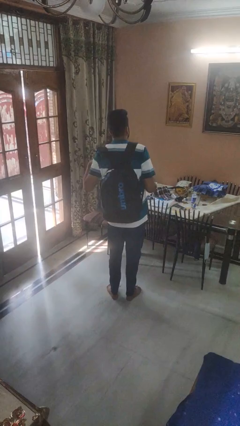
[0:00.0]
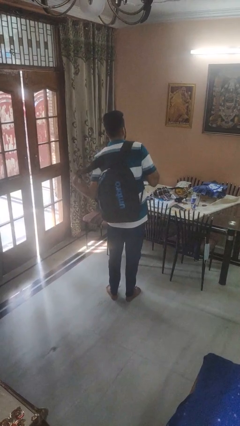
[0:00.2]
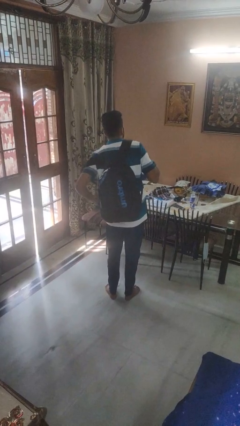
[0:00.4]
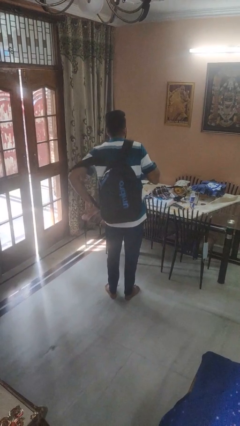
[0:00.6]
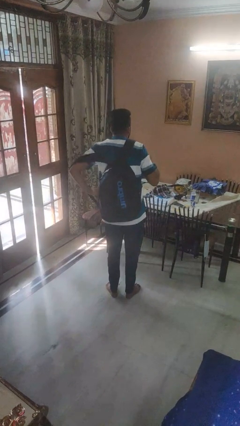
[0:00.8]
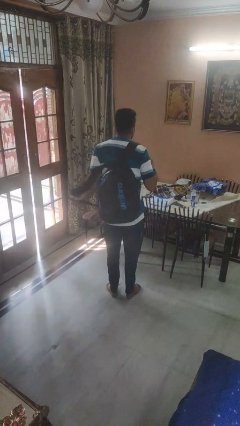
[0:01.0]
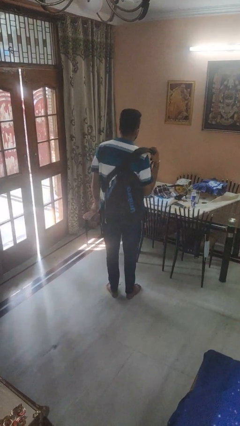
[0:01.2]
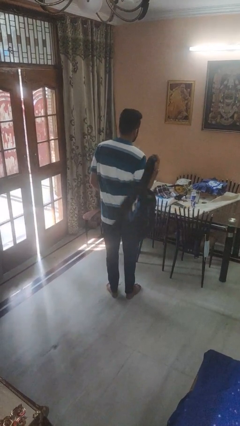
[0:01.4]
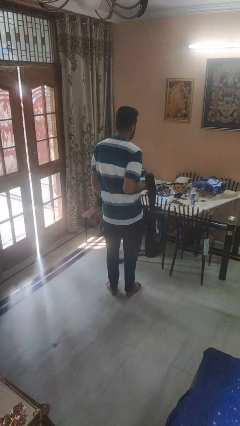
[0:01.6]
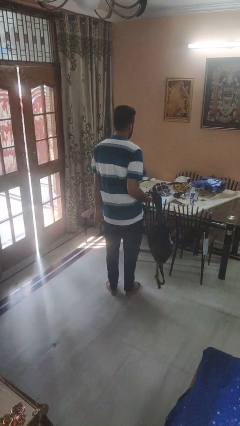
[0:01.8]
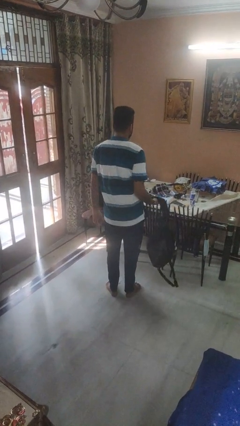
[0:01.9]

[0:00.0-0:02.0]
person takes off backpack

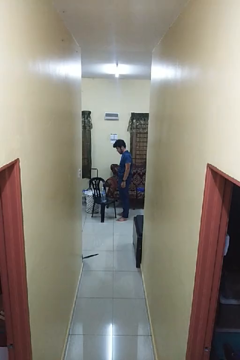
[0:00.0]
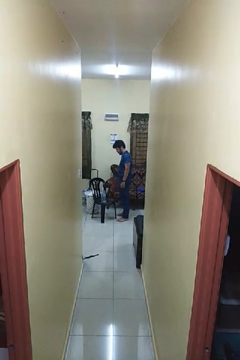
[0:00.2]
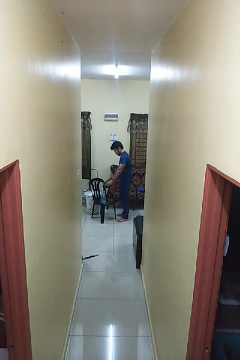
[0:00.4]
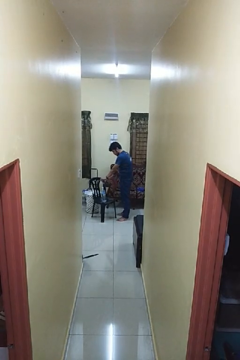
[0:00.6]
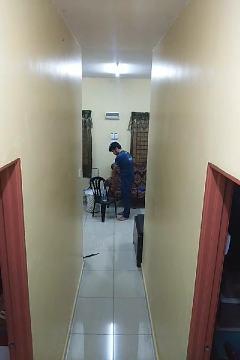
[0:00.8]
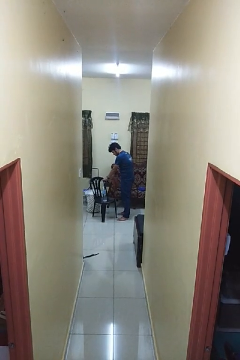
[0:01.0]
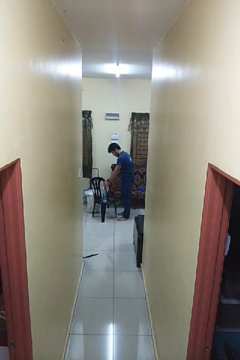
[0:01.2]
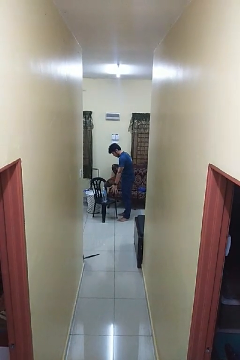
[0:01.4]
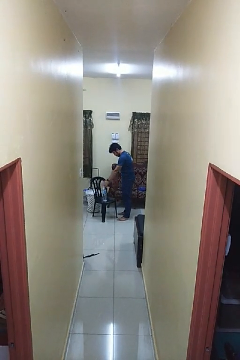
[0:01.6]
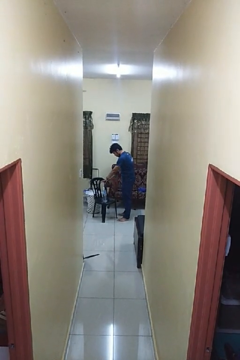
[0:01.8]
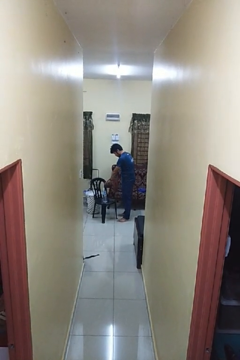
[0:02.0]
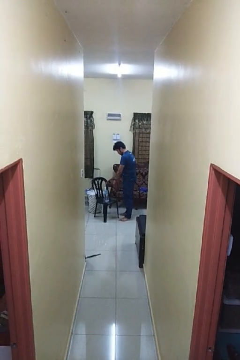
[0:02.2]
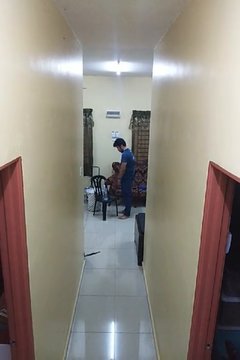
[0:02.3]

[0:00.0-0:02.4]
person waves hand over object

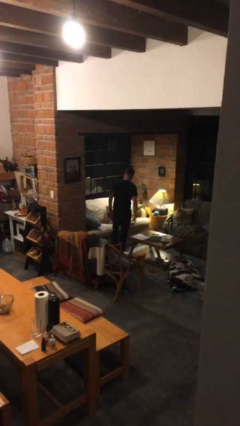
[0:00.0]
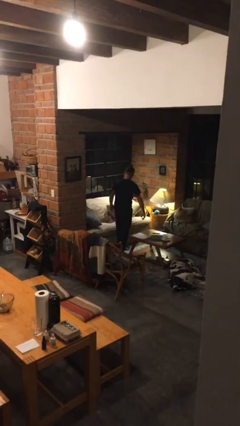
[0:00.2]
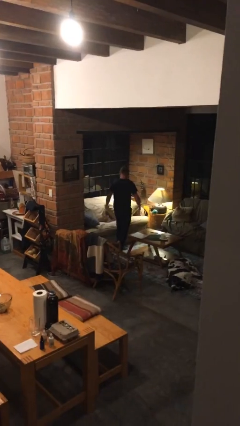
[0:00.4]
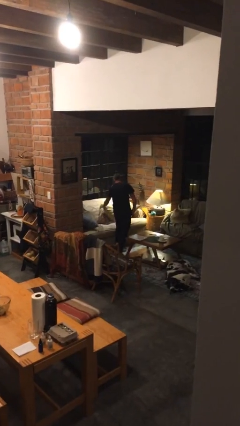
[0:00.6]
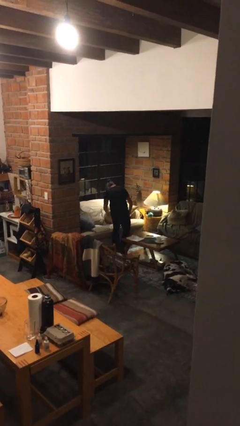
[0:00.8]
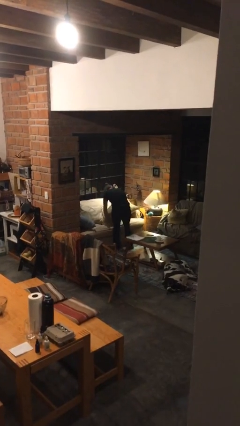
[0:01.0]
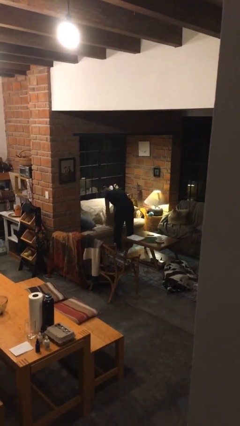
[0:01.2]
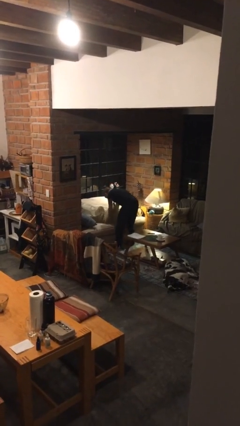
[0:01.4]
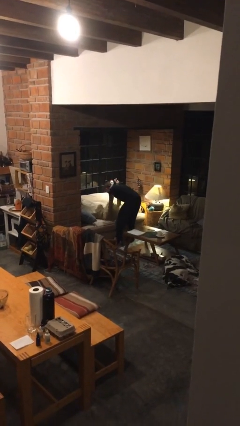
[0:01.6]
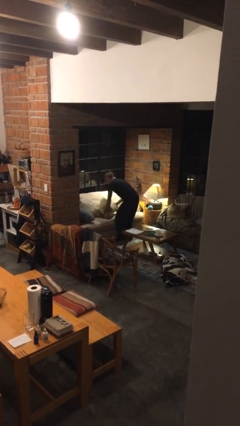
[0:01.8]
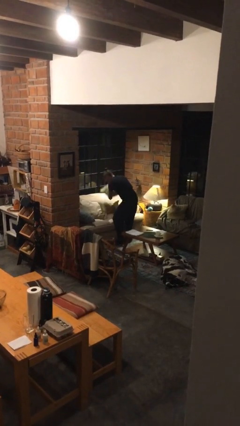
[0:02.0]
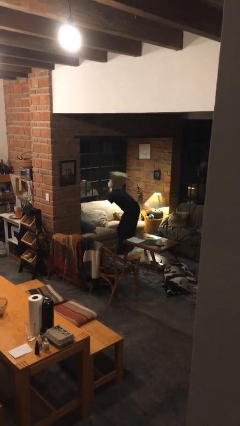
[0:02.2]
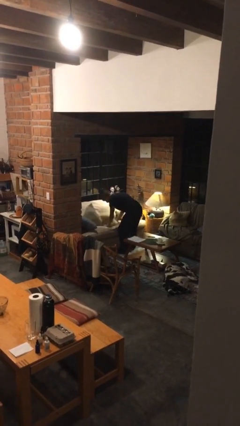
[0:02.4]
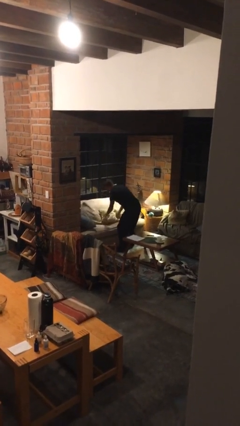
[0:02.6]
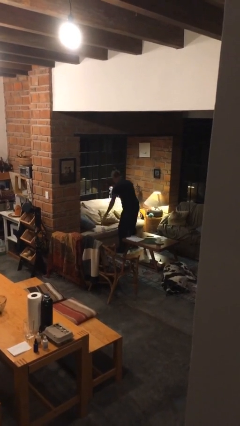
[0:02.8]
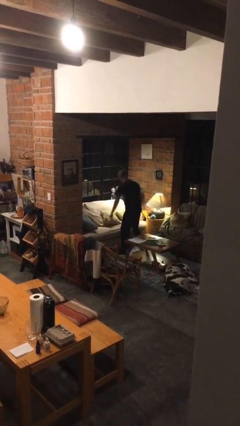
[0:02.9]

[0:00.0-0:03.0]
person searches in couch

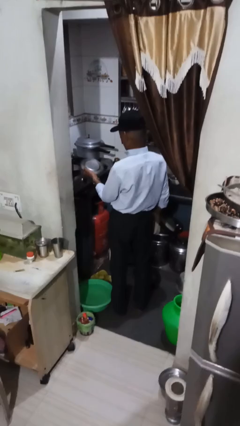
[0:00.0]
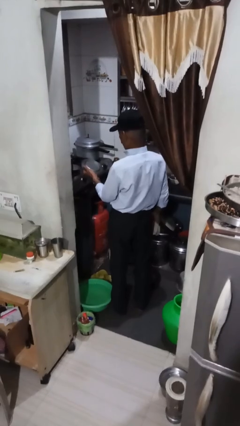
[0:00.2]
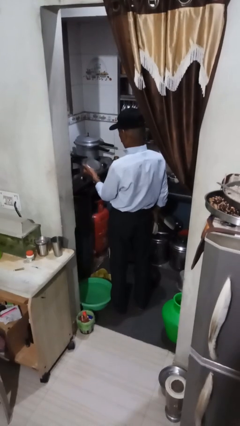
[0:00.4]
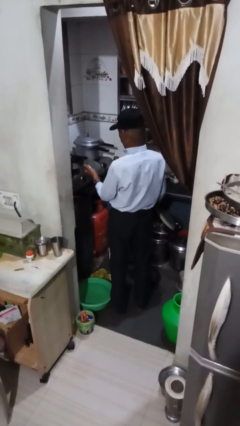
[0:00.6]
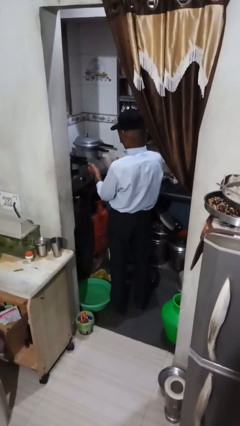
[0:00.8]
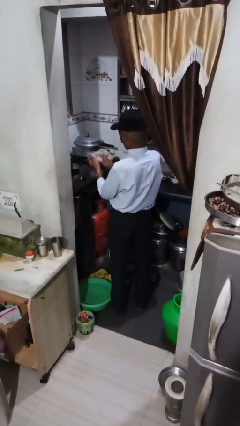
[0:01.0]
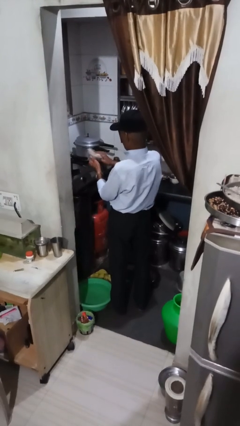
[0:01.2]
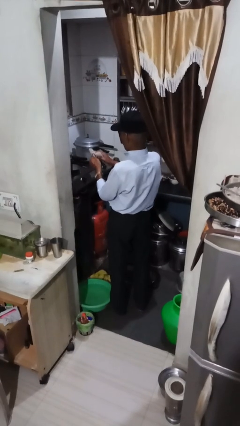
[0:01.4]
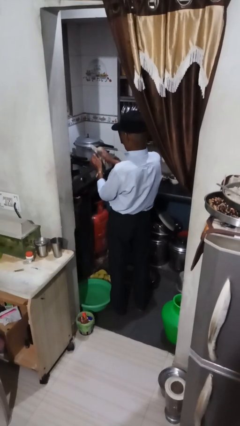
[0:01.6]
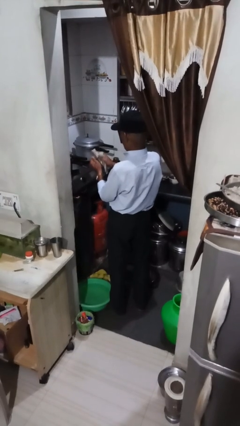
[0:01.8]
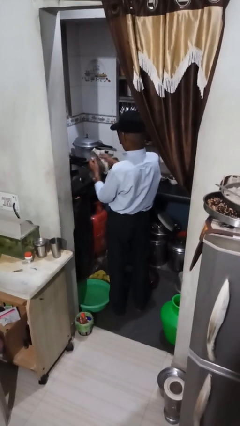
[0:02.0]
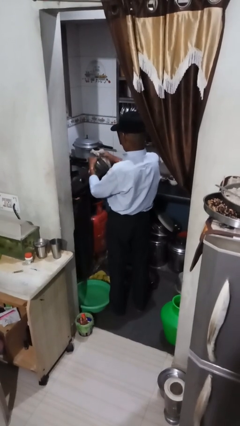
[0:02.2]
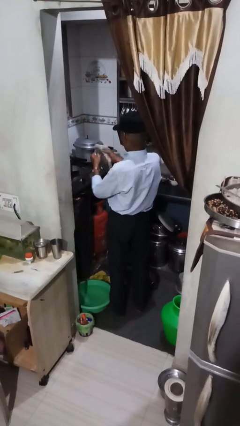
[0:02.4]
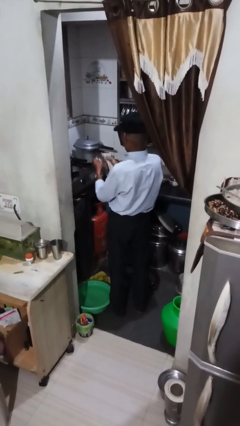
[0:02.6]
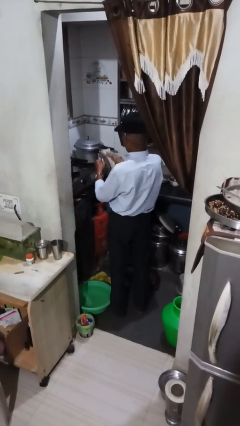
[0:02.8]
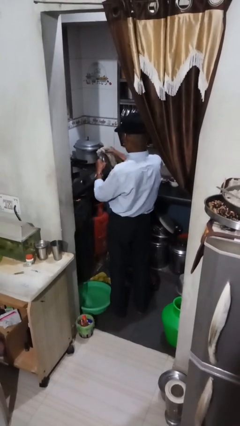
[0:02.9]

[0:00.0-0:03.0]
person dries dish

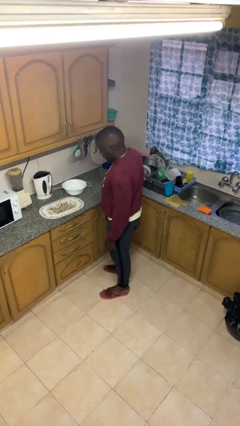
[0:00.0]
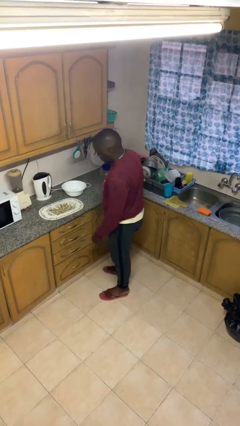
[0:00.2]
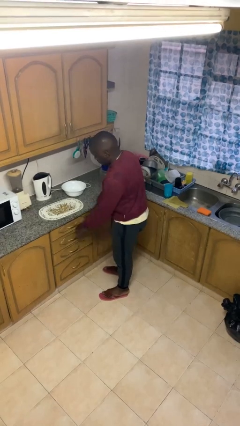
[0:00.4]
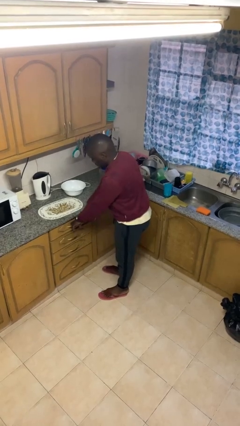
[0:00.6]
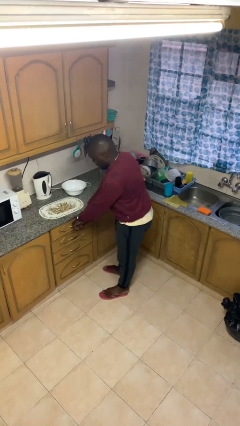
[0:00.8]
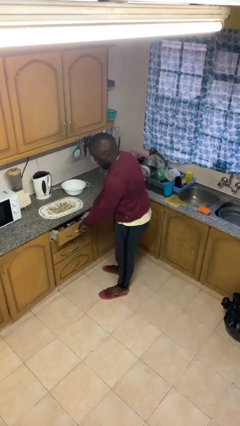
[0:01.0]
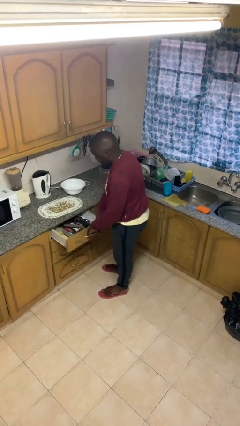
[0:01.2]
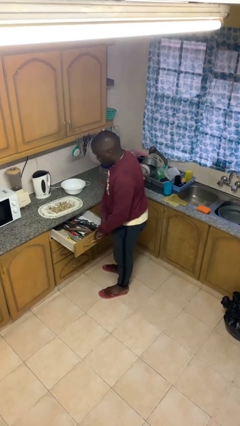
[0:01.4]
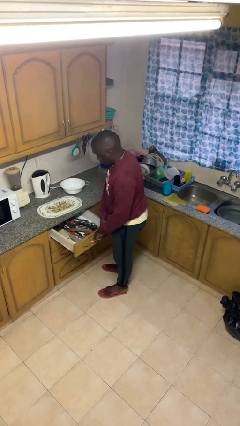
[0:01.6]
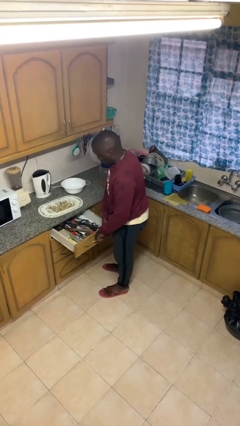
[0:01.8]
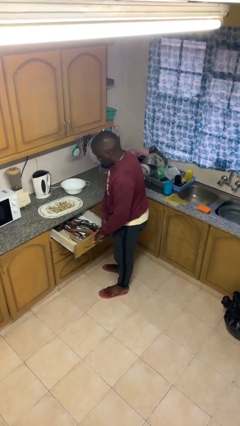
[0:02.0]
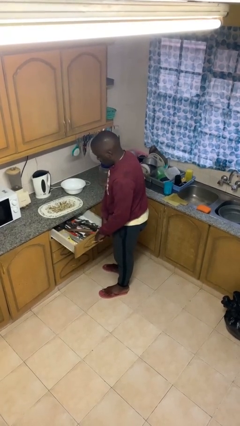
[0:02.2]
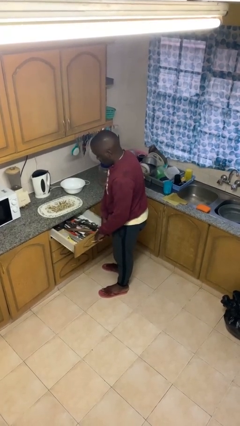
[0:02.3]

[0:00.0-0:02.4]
person opens kitchen drawer

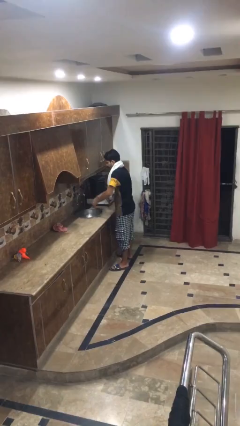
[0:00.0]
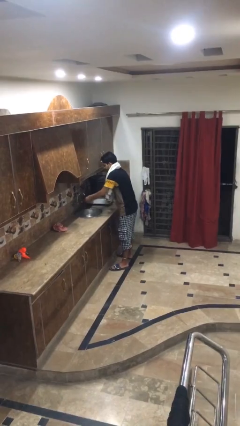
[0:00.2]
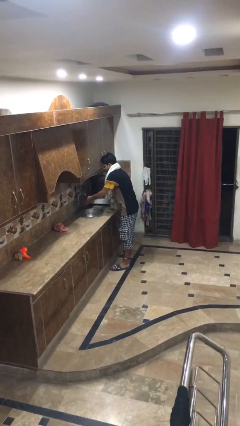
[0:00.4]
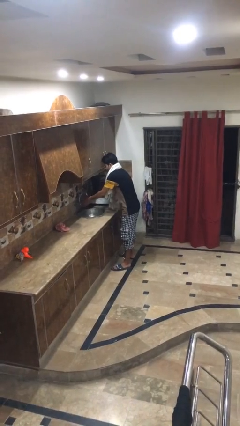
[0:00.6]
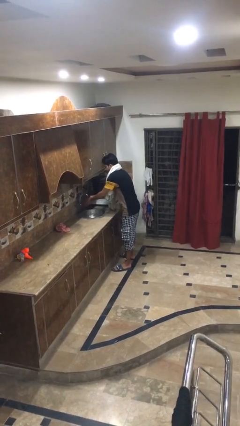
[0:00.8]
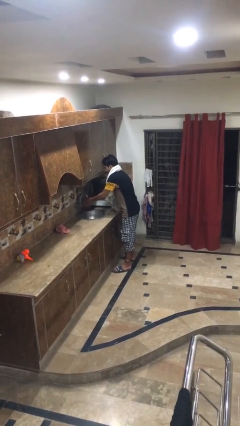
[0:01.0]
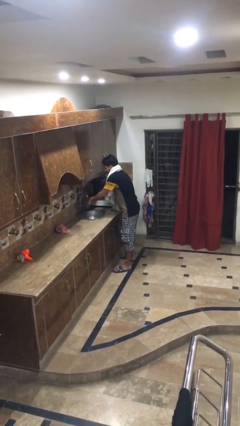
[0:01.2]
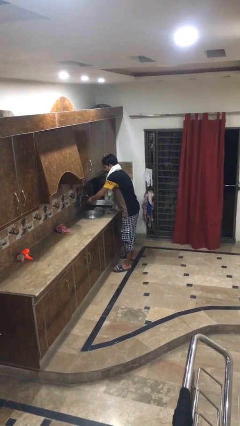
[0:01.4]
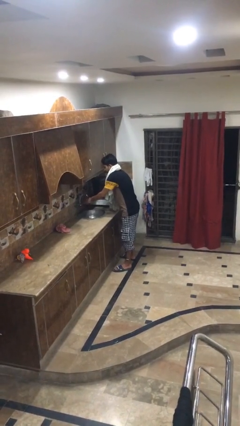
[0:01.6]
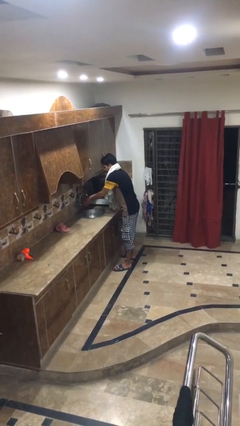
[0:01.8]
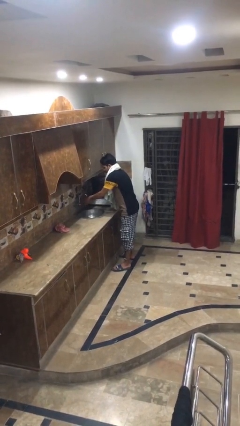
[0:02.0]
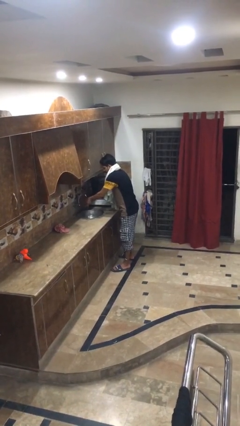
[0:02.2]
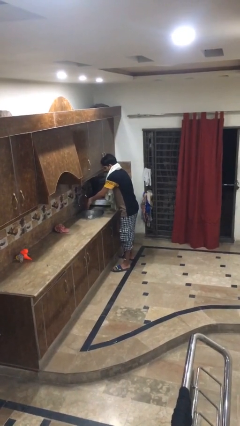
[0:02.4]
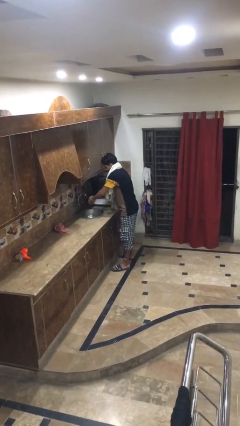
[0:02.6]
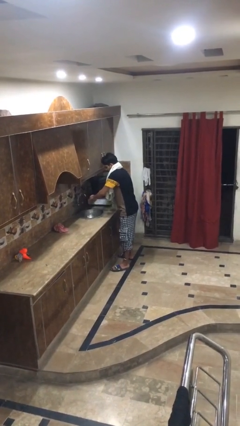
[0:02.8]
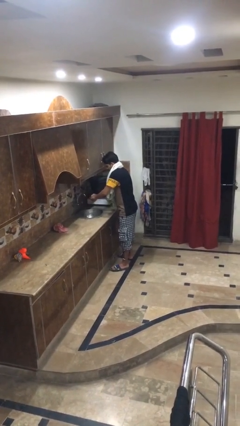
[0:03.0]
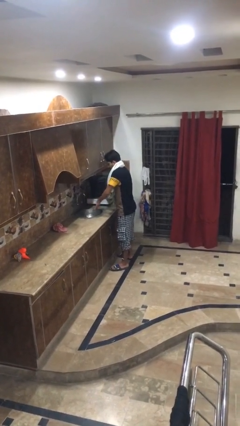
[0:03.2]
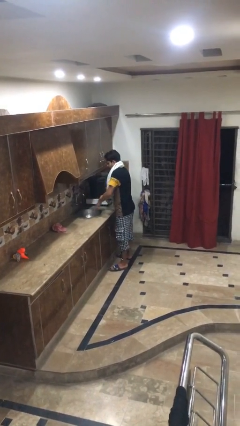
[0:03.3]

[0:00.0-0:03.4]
person washes hands

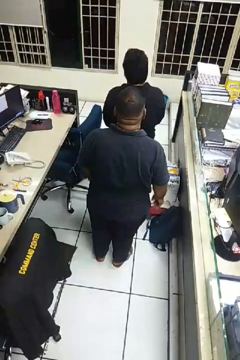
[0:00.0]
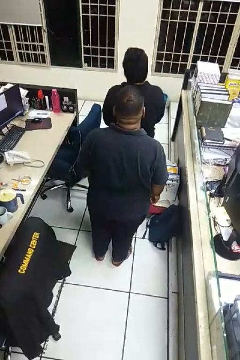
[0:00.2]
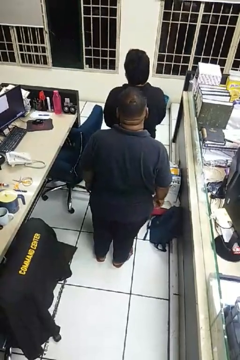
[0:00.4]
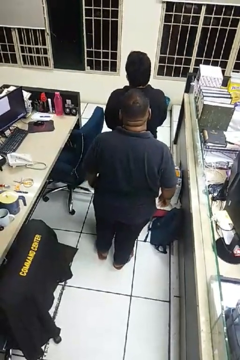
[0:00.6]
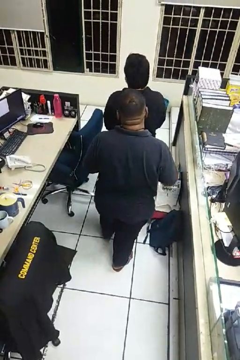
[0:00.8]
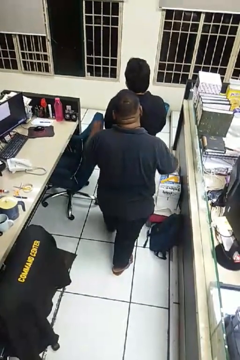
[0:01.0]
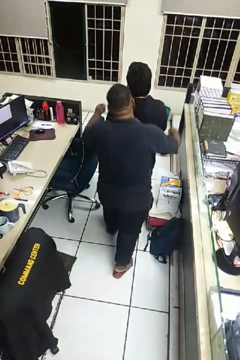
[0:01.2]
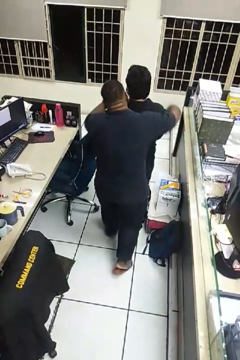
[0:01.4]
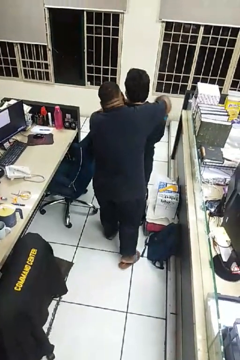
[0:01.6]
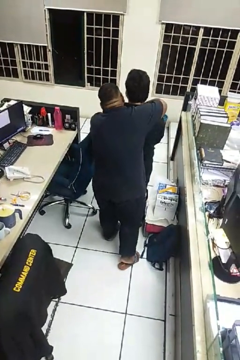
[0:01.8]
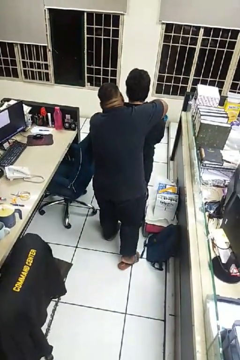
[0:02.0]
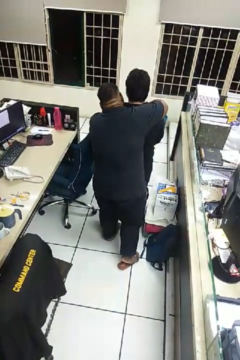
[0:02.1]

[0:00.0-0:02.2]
person hugs person from behind
